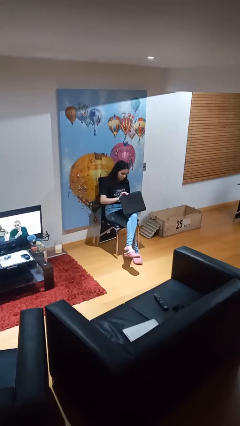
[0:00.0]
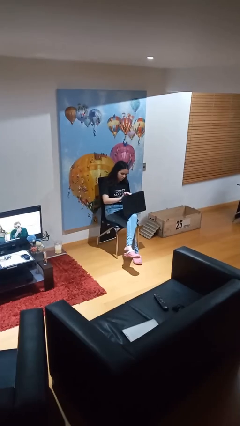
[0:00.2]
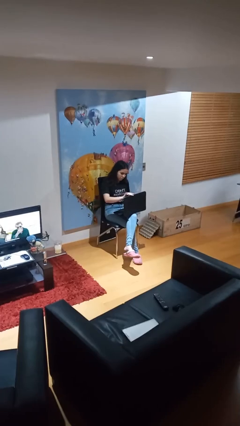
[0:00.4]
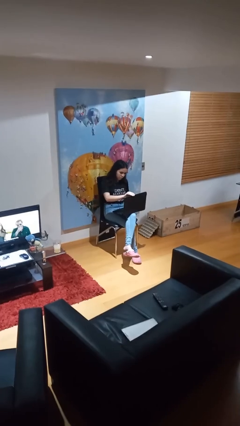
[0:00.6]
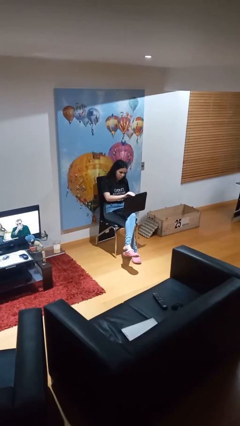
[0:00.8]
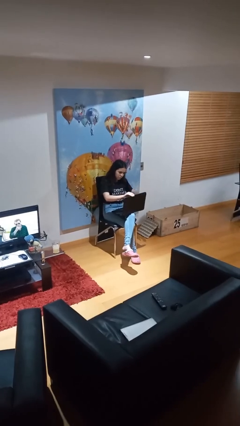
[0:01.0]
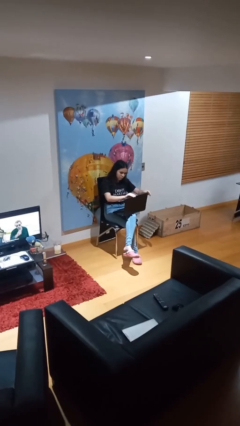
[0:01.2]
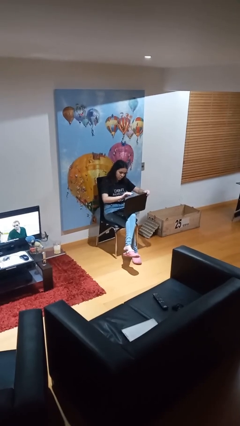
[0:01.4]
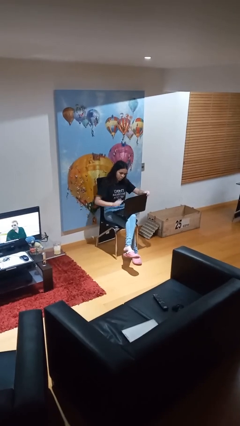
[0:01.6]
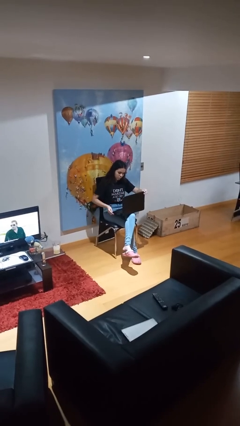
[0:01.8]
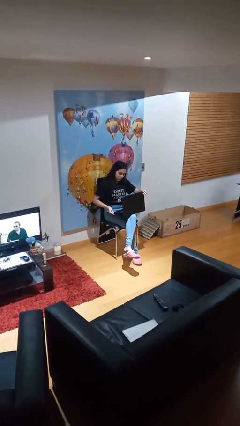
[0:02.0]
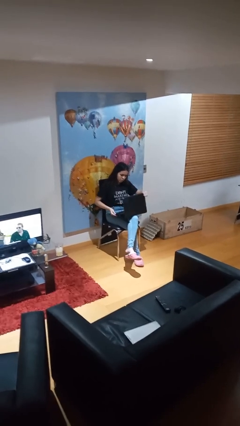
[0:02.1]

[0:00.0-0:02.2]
person interacts with laptop

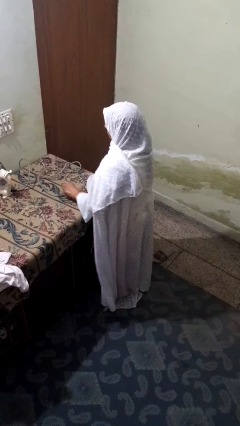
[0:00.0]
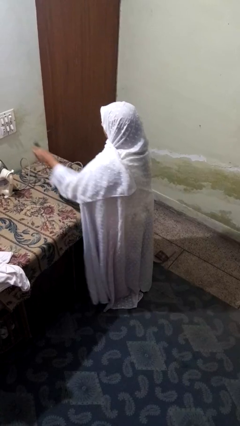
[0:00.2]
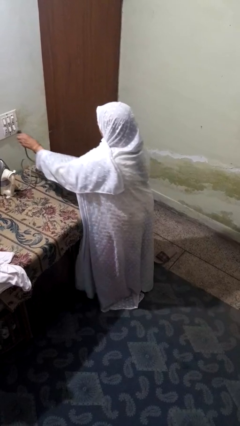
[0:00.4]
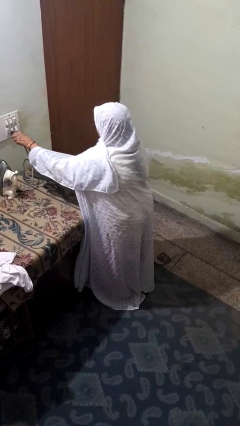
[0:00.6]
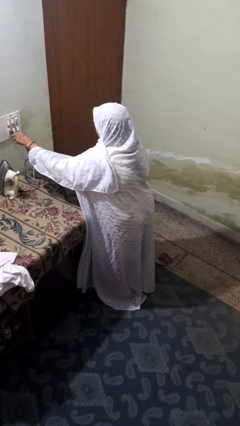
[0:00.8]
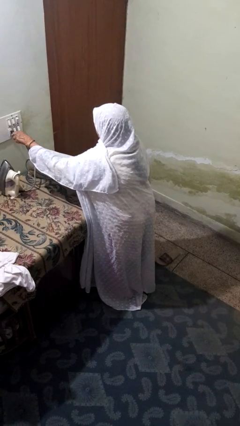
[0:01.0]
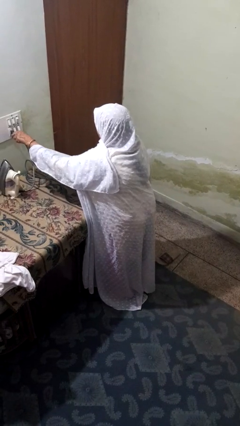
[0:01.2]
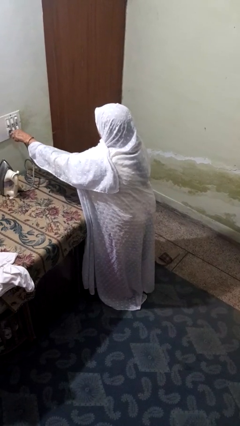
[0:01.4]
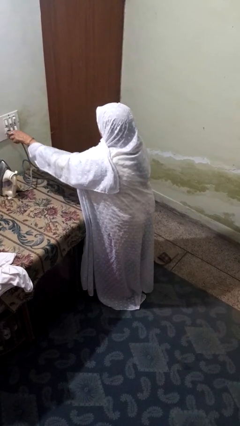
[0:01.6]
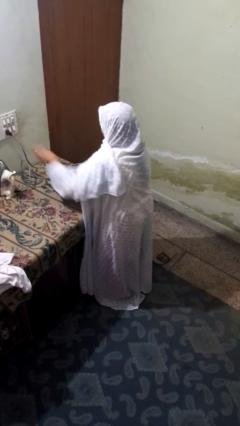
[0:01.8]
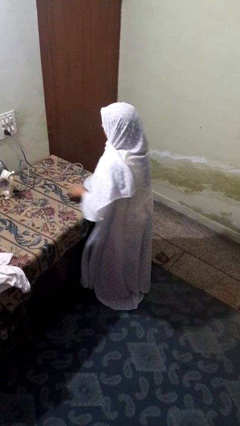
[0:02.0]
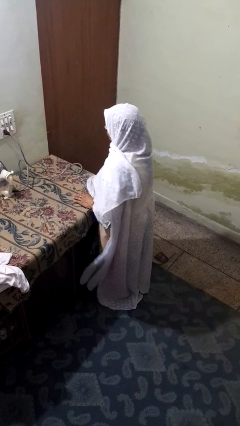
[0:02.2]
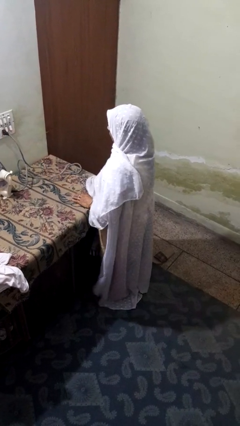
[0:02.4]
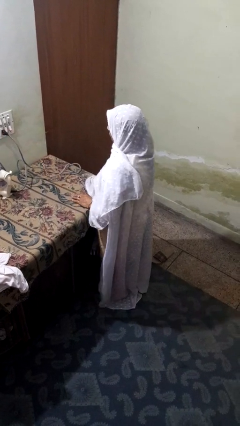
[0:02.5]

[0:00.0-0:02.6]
person plugs into electrical socket

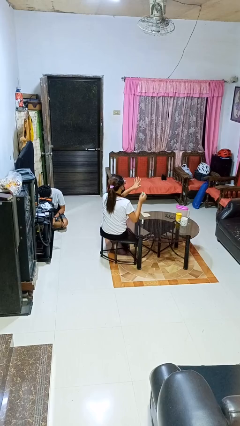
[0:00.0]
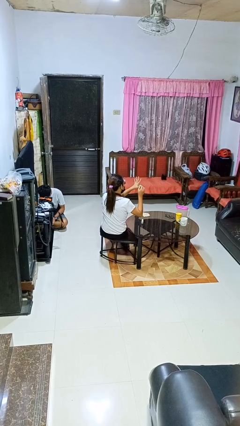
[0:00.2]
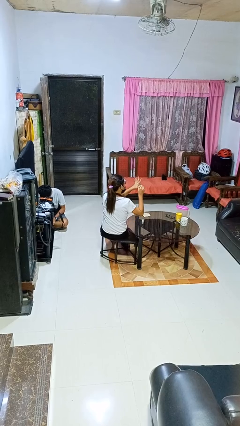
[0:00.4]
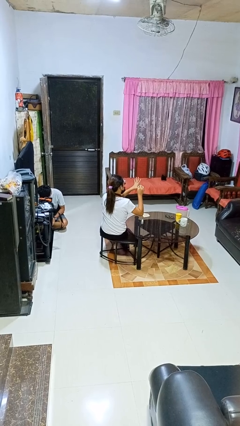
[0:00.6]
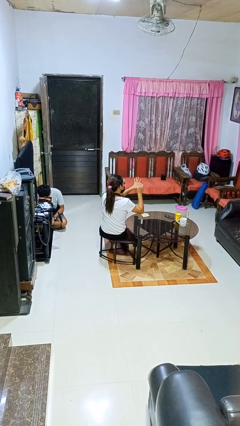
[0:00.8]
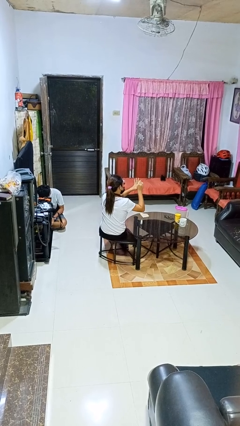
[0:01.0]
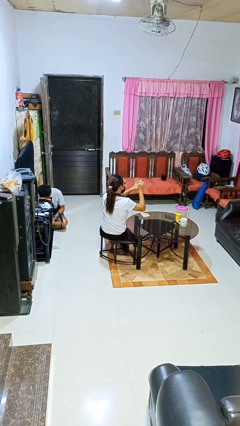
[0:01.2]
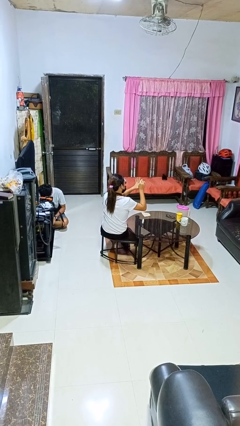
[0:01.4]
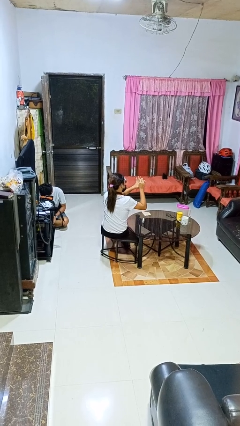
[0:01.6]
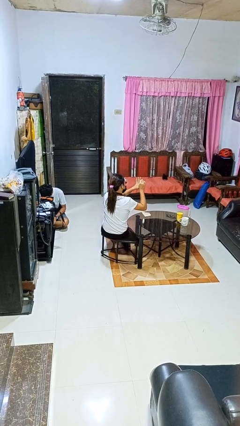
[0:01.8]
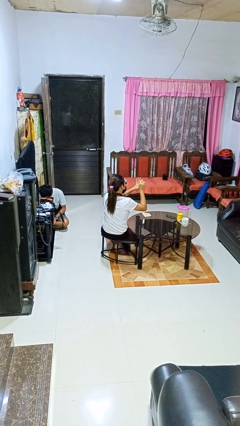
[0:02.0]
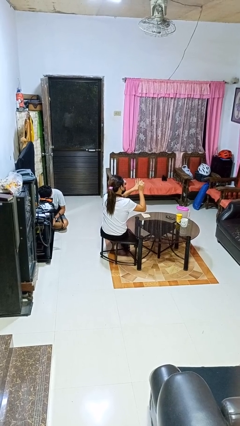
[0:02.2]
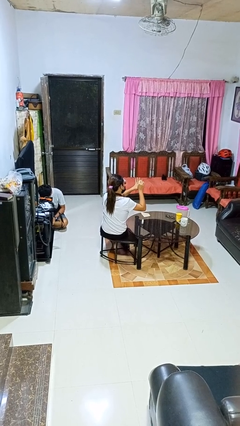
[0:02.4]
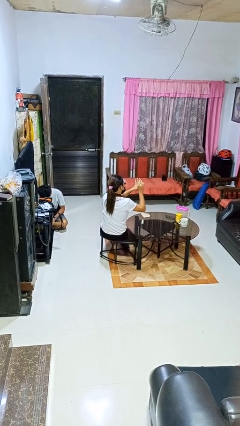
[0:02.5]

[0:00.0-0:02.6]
person paints fingernails

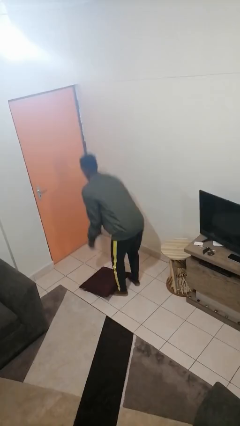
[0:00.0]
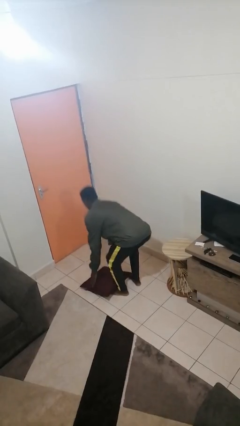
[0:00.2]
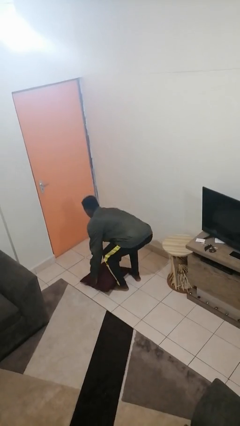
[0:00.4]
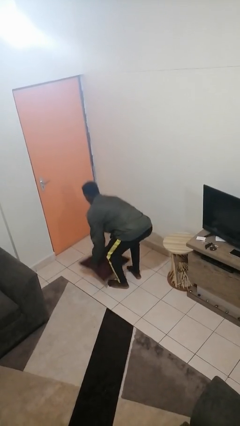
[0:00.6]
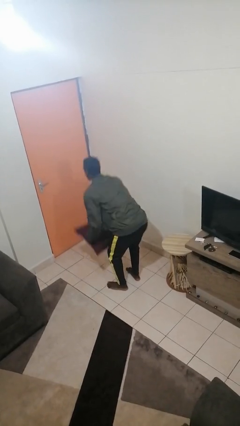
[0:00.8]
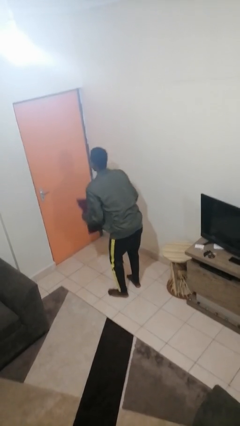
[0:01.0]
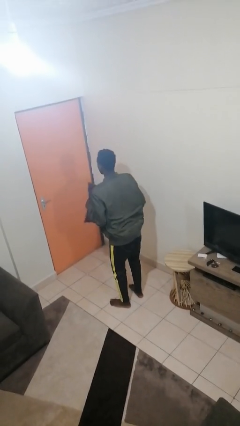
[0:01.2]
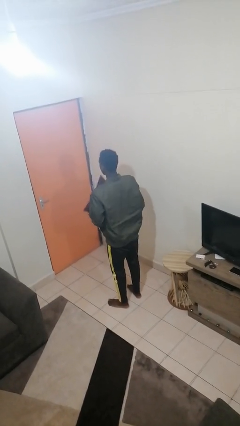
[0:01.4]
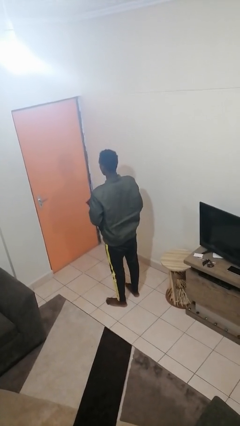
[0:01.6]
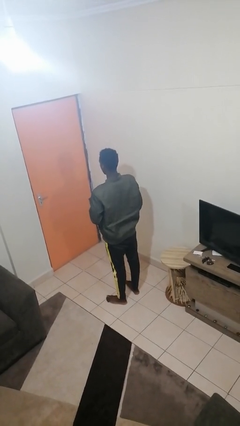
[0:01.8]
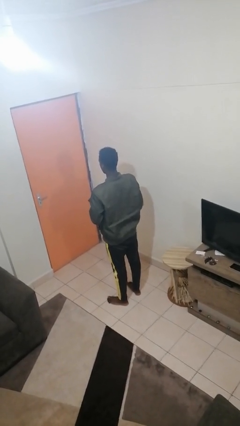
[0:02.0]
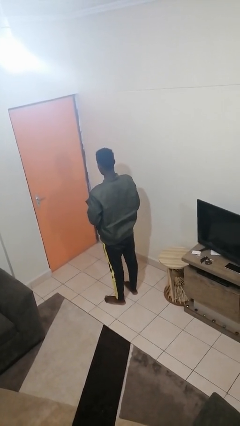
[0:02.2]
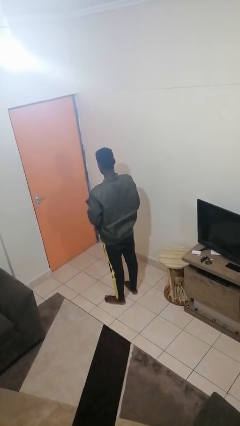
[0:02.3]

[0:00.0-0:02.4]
person picks up object from floor

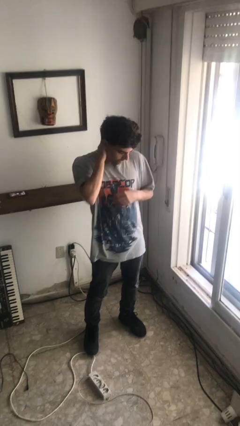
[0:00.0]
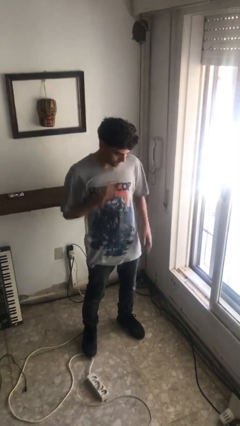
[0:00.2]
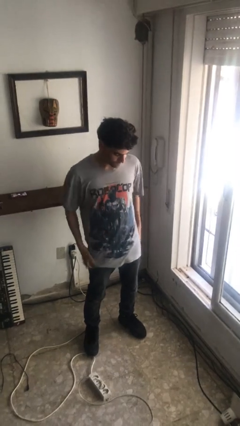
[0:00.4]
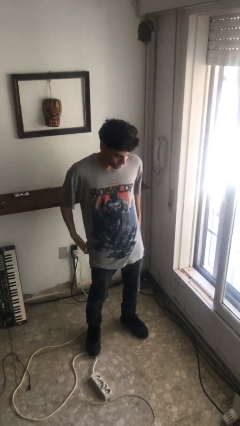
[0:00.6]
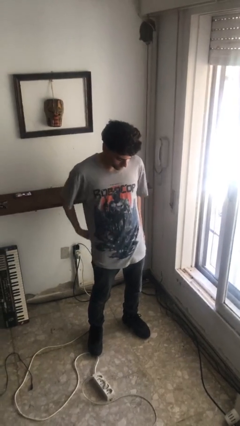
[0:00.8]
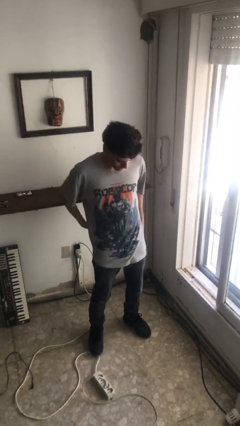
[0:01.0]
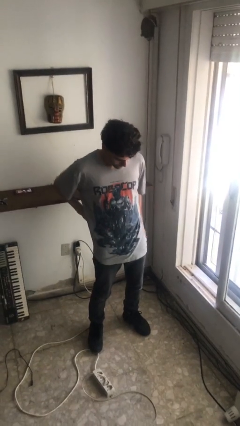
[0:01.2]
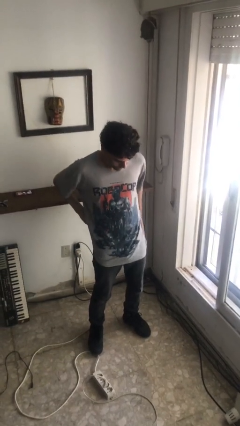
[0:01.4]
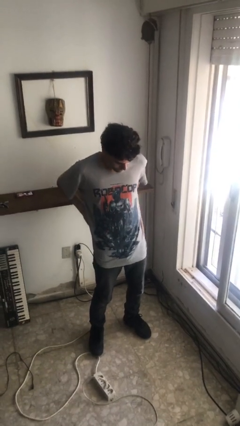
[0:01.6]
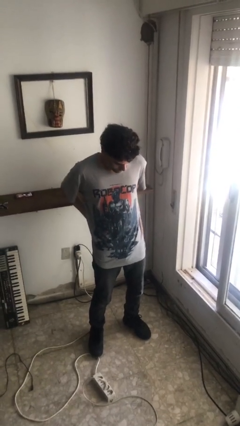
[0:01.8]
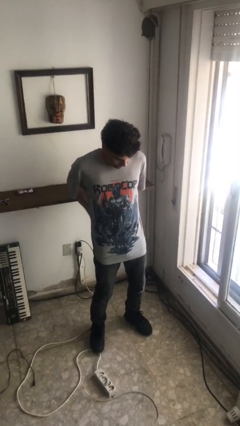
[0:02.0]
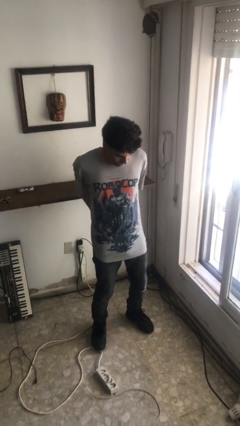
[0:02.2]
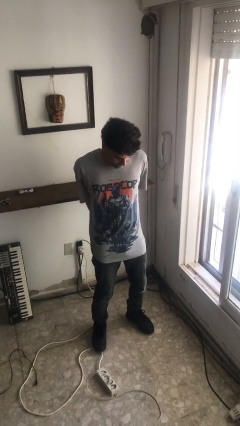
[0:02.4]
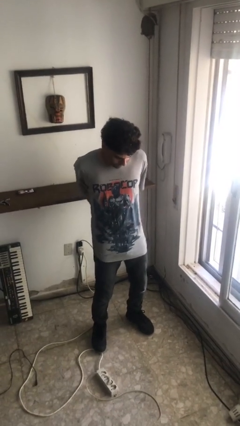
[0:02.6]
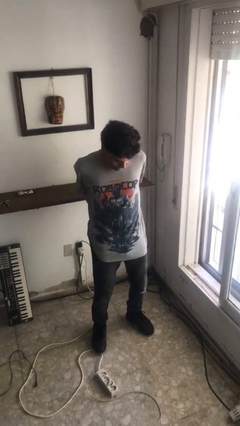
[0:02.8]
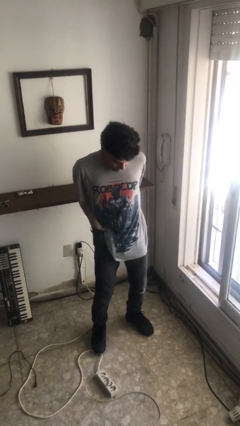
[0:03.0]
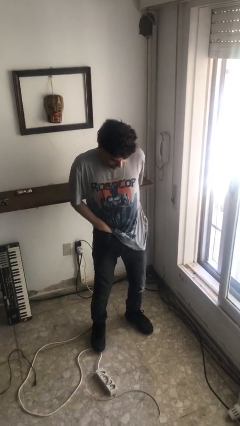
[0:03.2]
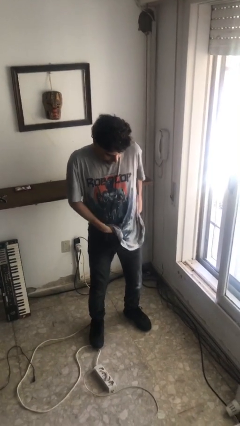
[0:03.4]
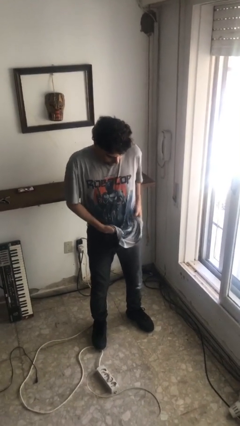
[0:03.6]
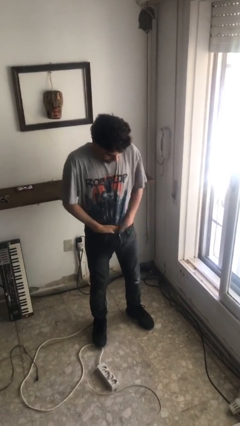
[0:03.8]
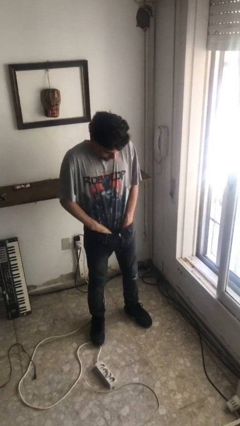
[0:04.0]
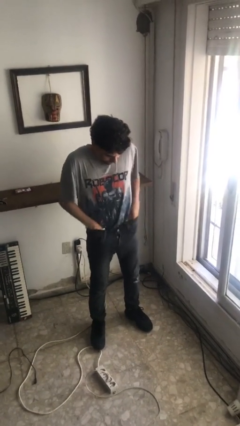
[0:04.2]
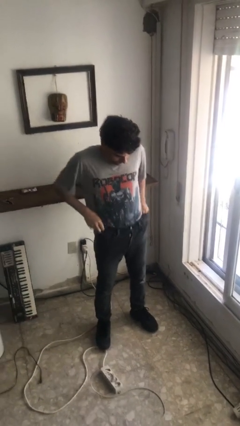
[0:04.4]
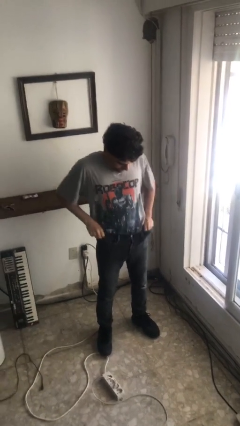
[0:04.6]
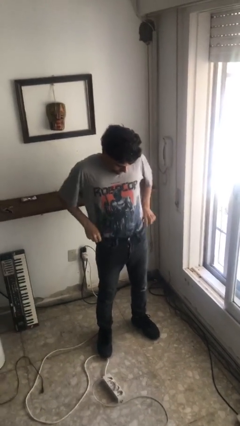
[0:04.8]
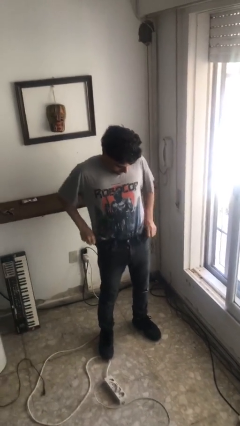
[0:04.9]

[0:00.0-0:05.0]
person tucks in shirt

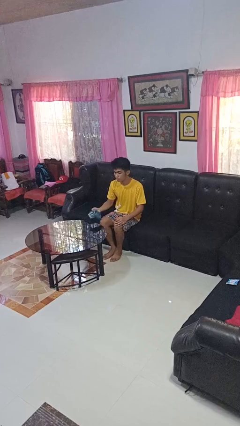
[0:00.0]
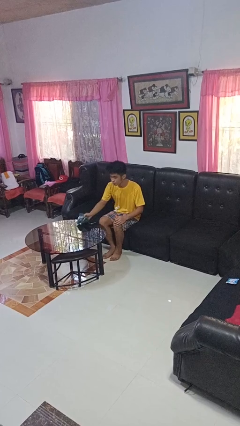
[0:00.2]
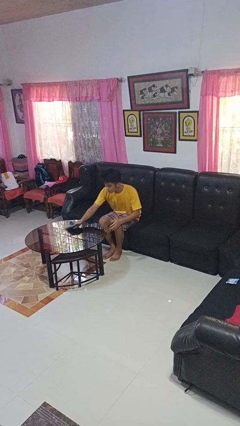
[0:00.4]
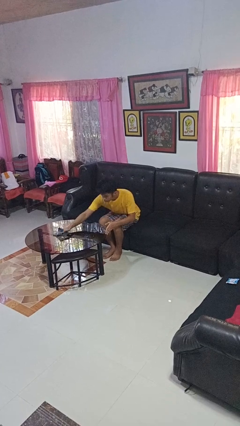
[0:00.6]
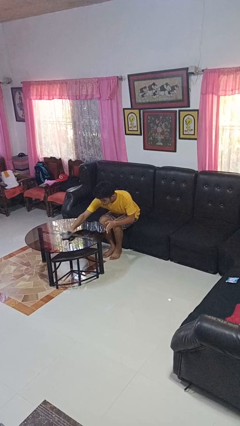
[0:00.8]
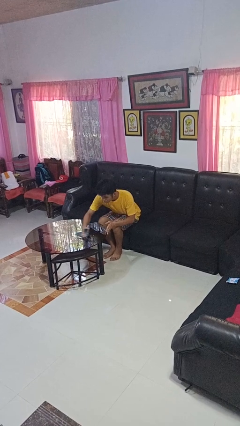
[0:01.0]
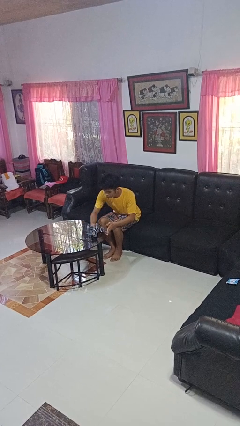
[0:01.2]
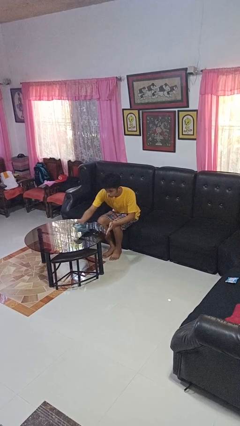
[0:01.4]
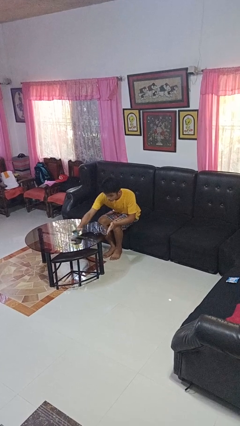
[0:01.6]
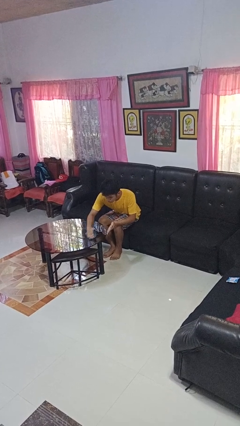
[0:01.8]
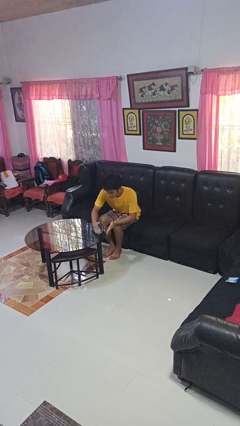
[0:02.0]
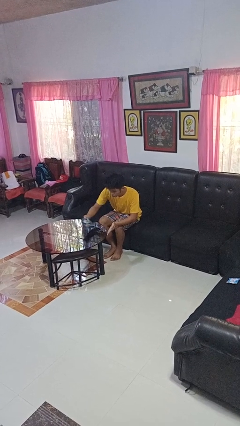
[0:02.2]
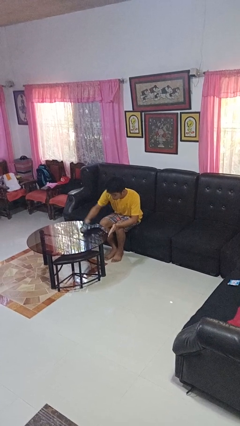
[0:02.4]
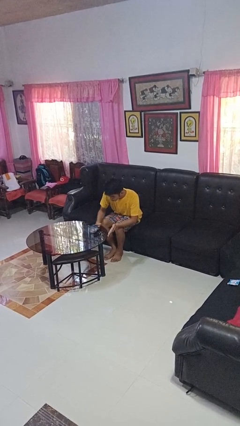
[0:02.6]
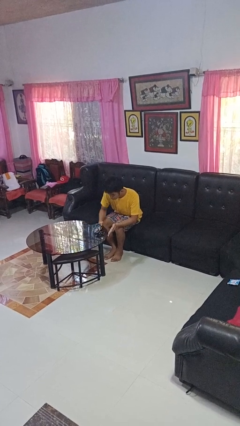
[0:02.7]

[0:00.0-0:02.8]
person cleans table with rag
